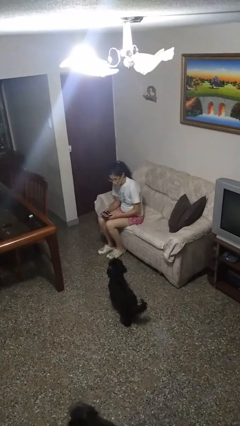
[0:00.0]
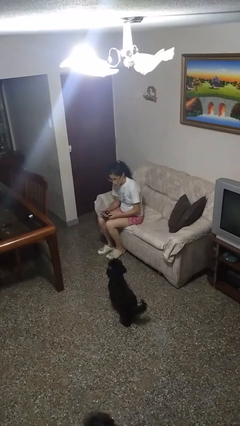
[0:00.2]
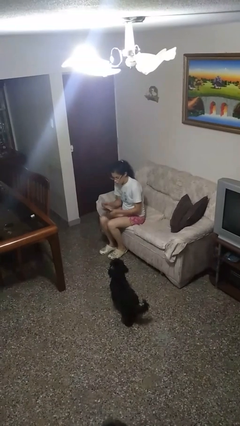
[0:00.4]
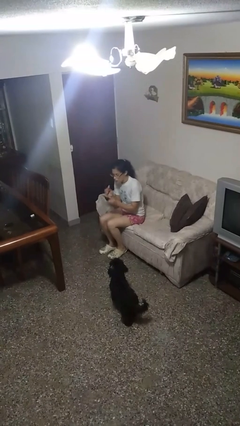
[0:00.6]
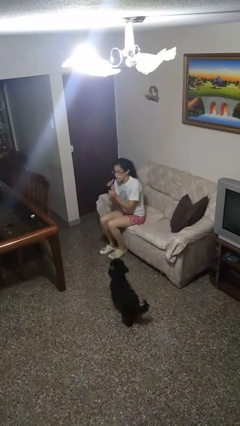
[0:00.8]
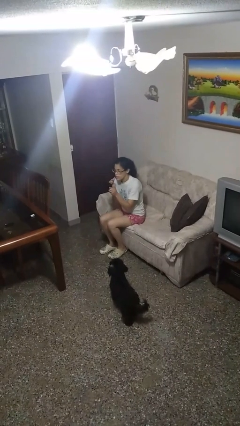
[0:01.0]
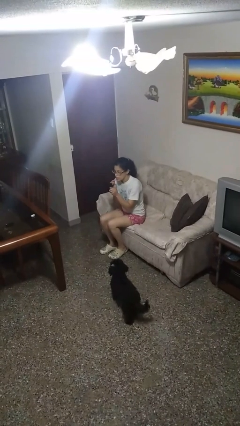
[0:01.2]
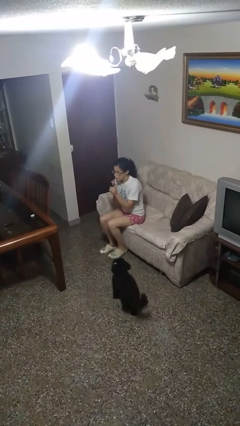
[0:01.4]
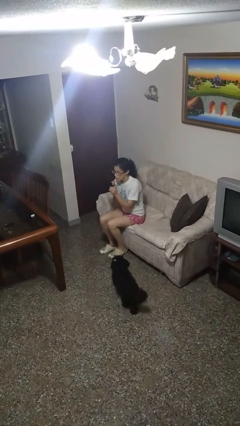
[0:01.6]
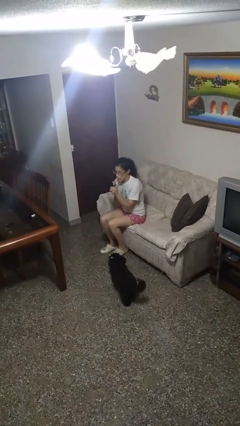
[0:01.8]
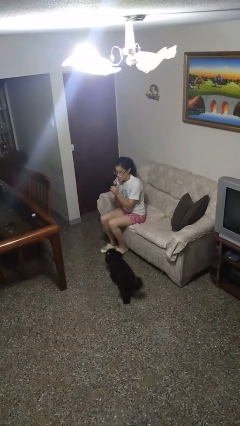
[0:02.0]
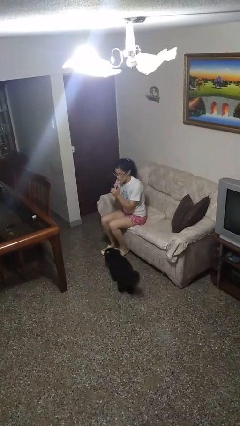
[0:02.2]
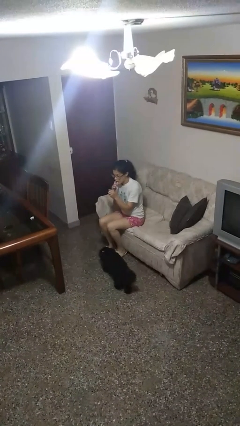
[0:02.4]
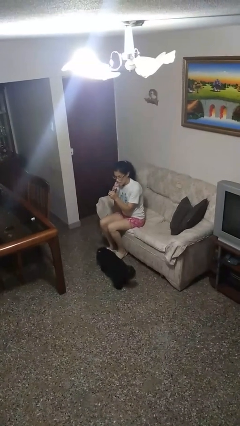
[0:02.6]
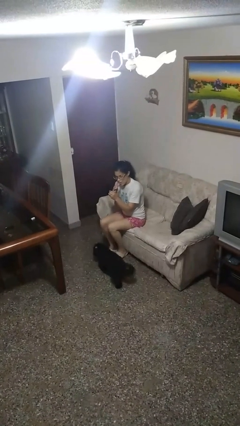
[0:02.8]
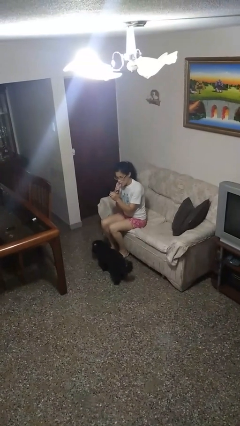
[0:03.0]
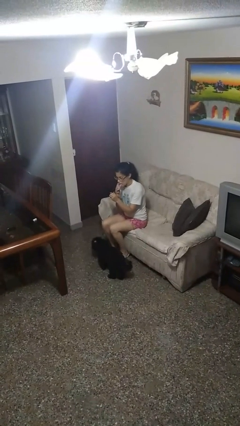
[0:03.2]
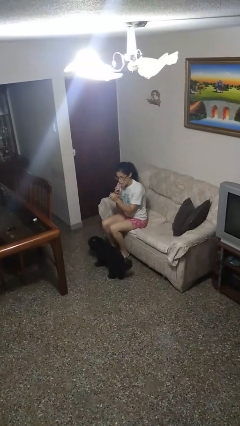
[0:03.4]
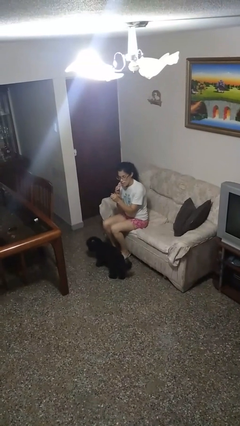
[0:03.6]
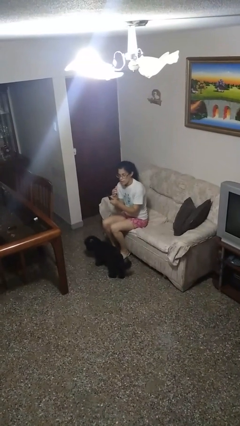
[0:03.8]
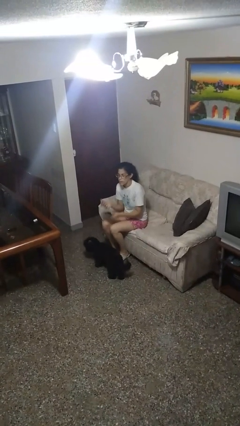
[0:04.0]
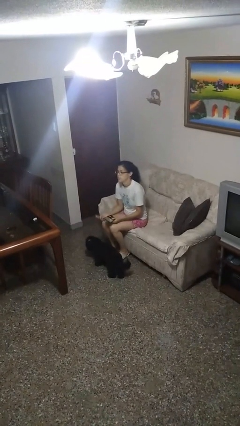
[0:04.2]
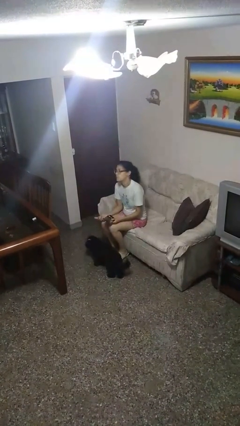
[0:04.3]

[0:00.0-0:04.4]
person applies lip makeup

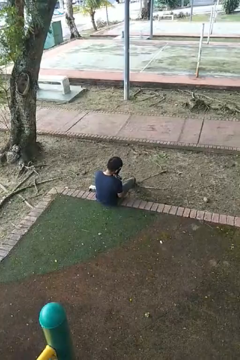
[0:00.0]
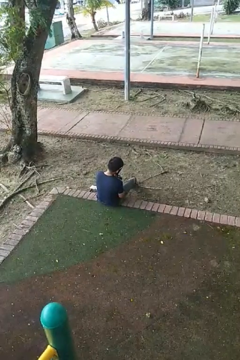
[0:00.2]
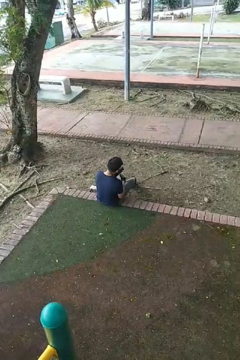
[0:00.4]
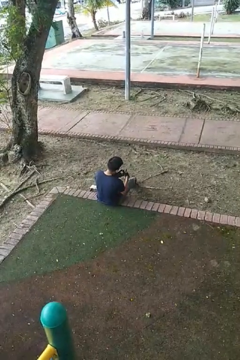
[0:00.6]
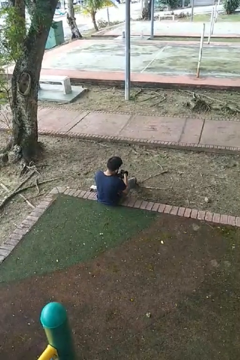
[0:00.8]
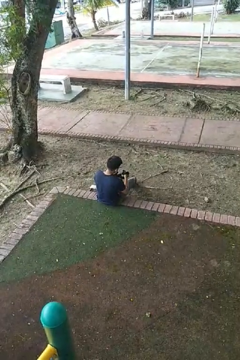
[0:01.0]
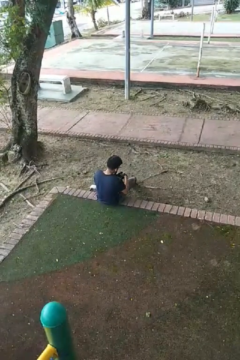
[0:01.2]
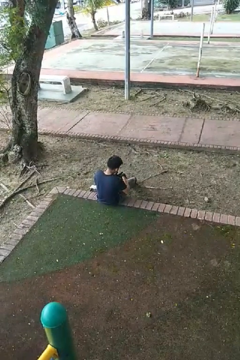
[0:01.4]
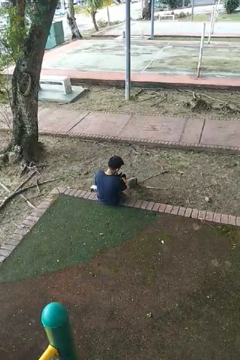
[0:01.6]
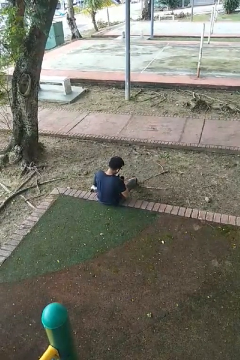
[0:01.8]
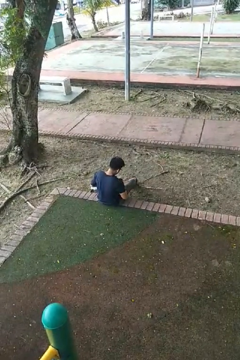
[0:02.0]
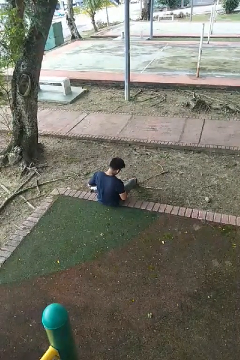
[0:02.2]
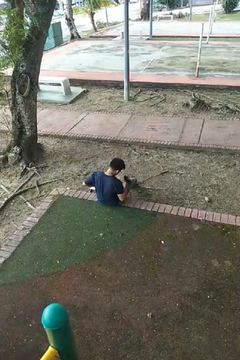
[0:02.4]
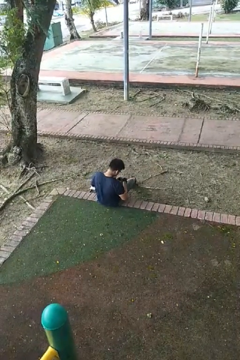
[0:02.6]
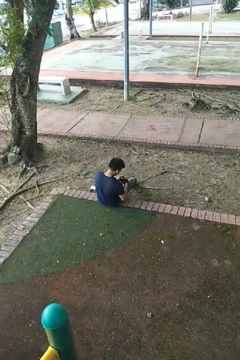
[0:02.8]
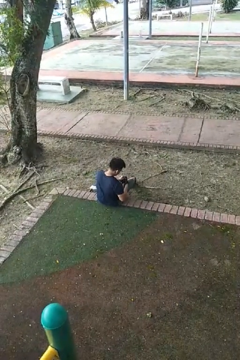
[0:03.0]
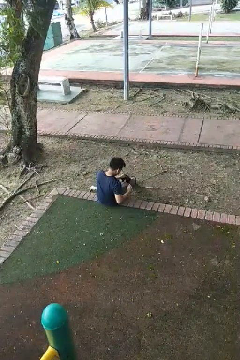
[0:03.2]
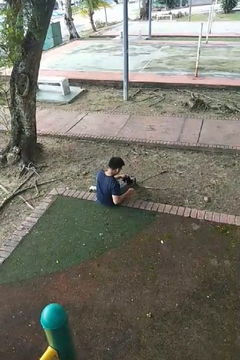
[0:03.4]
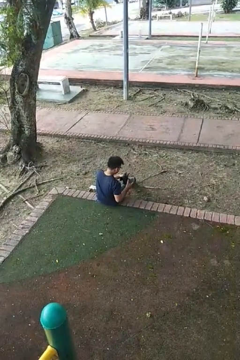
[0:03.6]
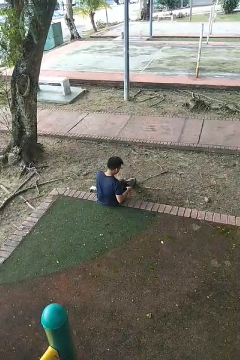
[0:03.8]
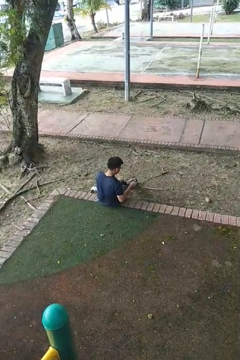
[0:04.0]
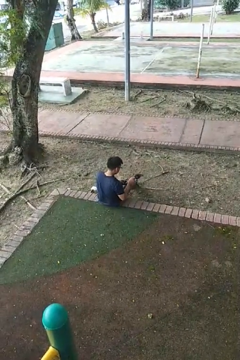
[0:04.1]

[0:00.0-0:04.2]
person takes off gloves

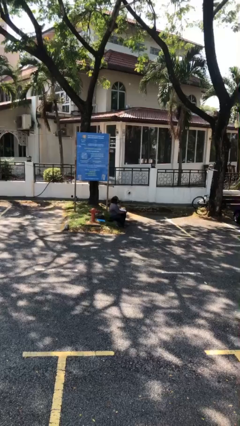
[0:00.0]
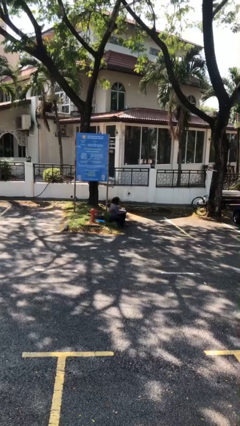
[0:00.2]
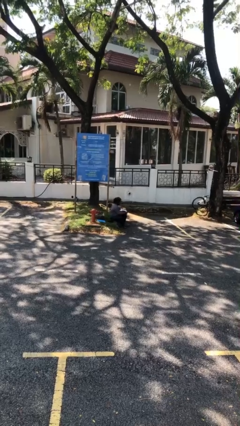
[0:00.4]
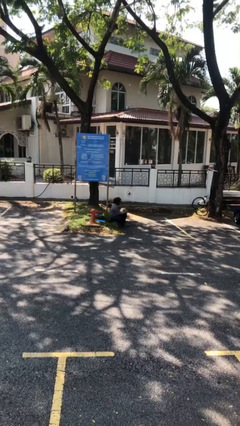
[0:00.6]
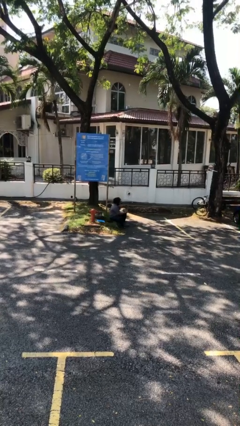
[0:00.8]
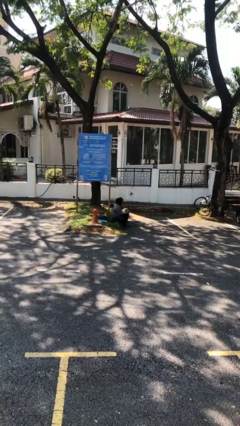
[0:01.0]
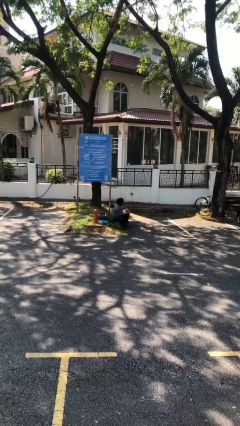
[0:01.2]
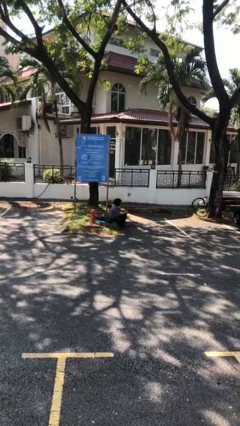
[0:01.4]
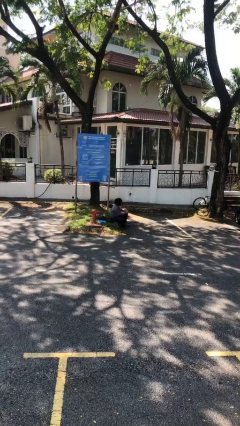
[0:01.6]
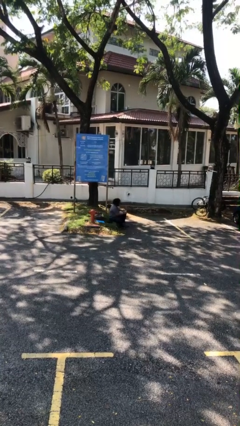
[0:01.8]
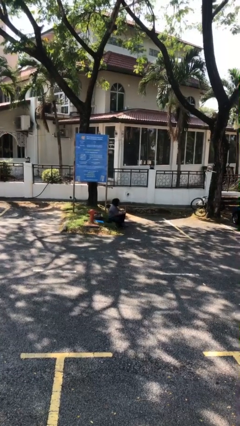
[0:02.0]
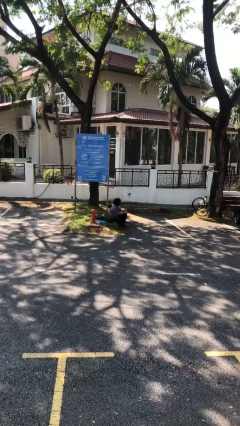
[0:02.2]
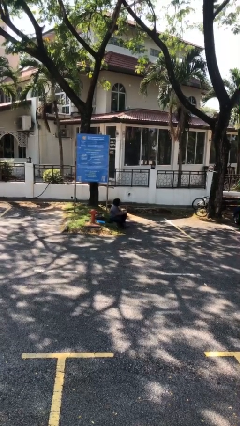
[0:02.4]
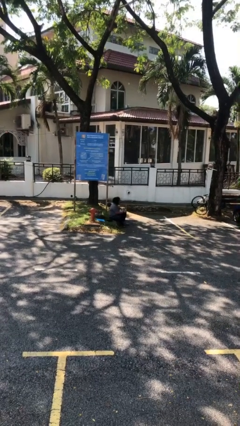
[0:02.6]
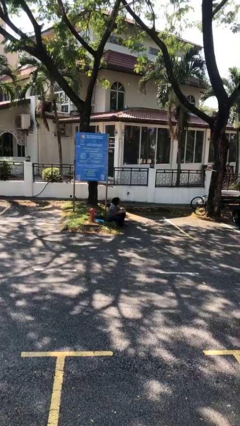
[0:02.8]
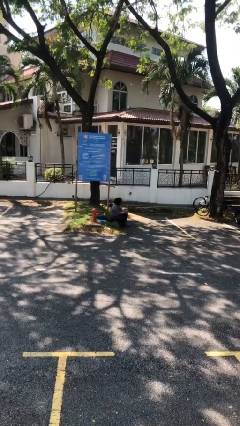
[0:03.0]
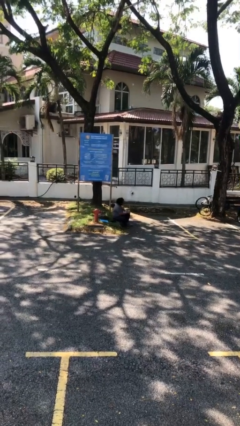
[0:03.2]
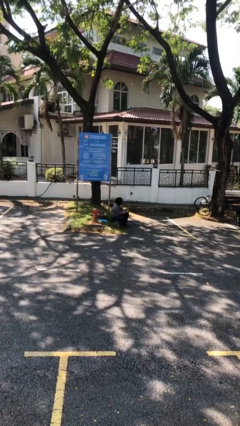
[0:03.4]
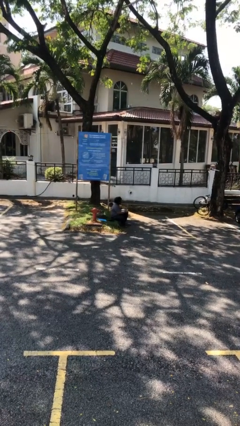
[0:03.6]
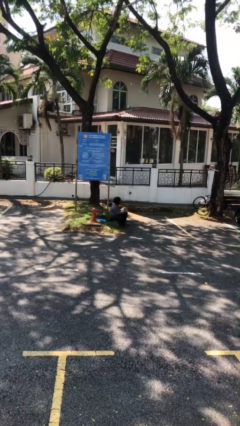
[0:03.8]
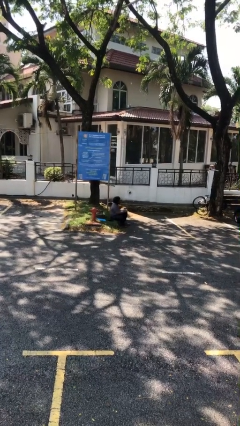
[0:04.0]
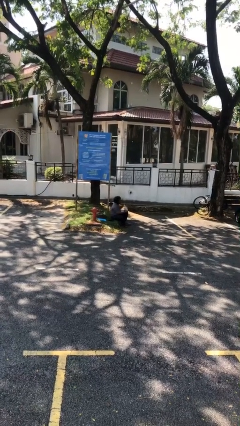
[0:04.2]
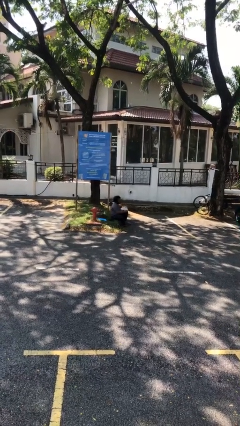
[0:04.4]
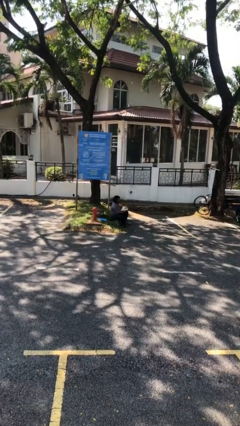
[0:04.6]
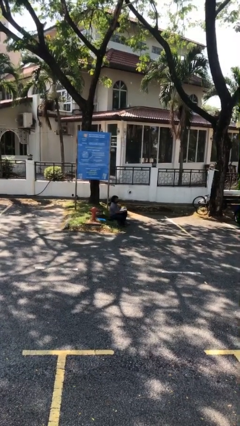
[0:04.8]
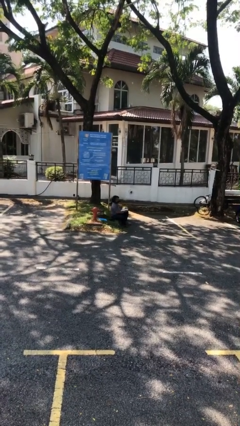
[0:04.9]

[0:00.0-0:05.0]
person interacts with laptop

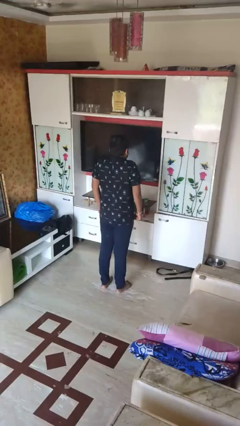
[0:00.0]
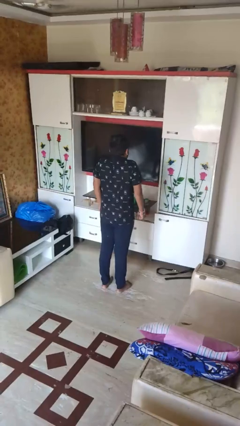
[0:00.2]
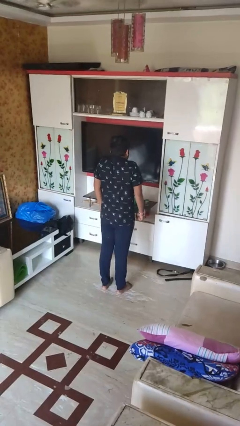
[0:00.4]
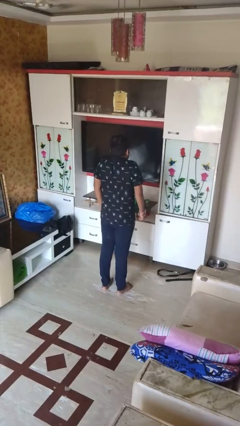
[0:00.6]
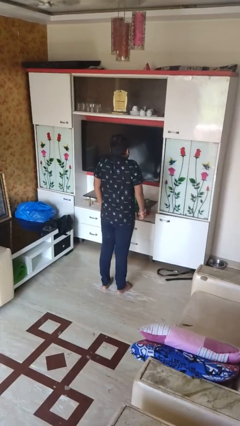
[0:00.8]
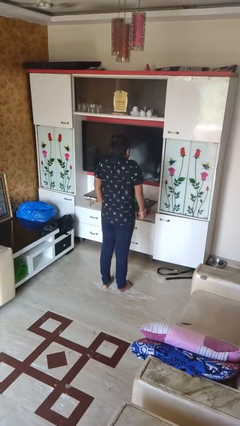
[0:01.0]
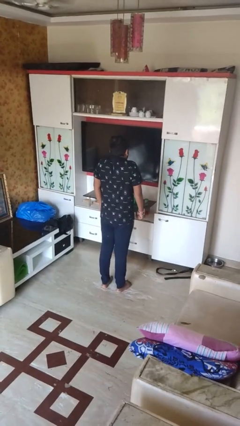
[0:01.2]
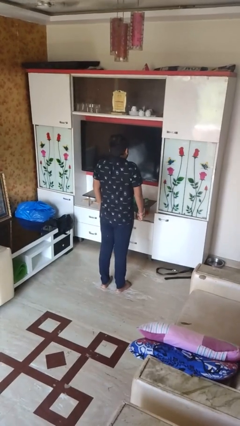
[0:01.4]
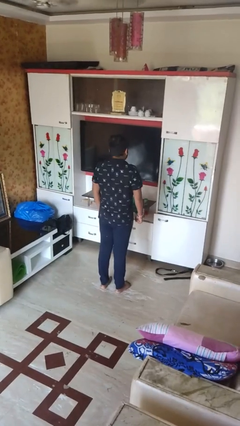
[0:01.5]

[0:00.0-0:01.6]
person shrugs

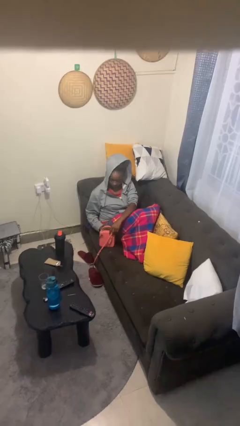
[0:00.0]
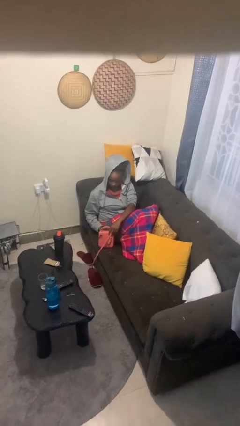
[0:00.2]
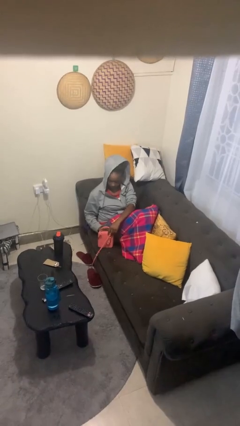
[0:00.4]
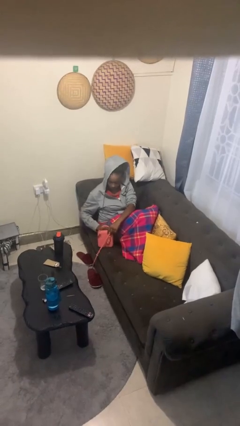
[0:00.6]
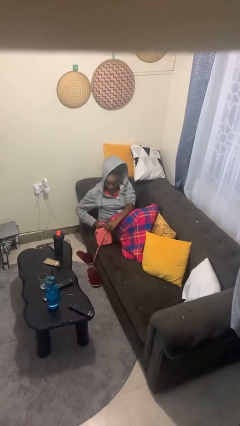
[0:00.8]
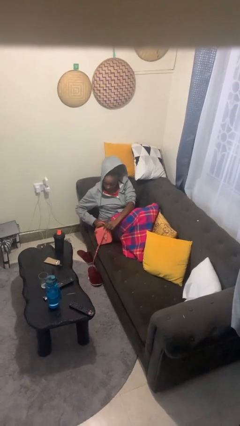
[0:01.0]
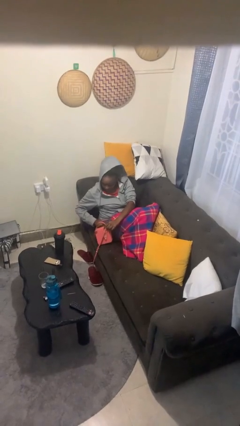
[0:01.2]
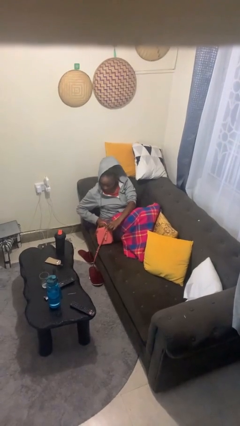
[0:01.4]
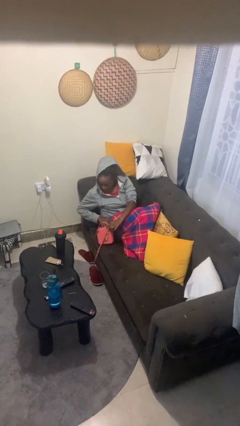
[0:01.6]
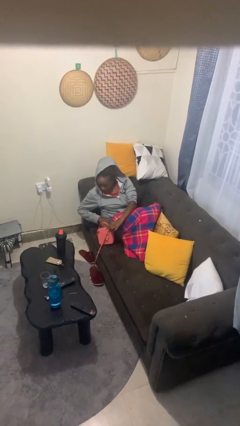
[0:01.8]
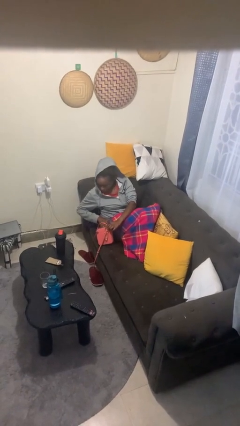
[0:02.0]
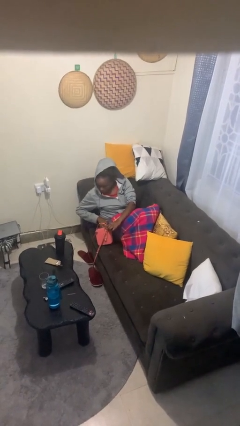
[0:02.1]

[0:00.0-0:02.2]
person searches in purse

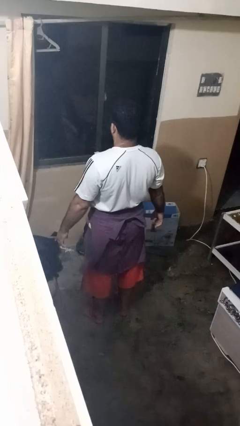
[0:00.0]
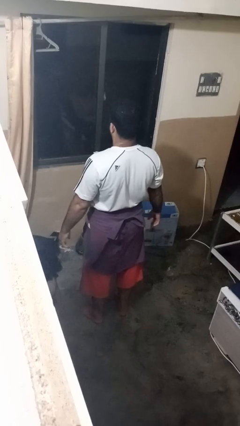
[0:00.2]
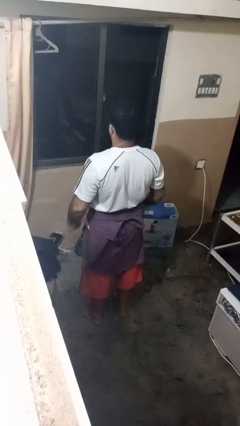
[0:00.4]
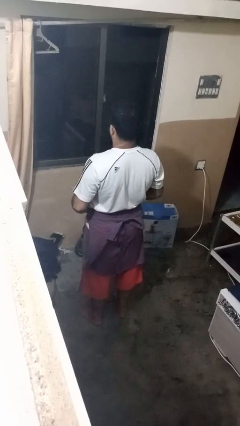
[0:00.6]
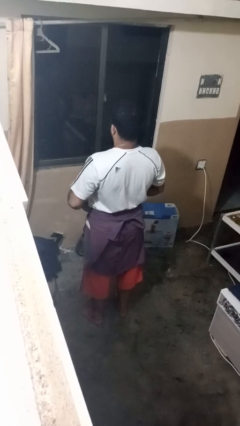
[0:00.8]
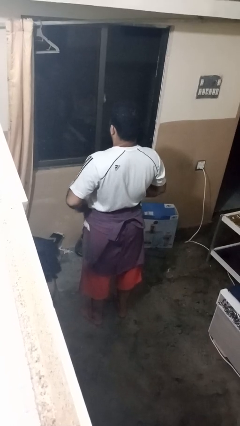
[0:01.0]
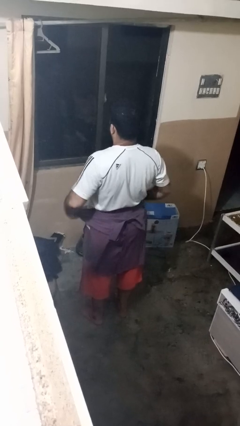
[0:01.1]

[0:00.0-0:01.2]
person unties jacket around waist
